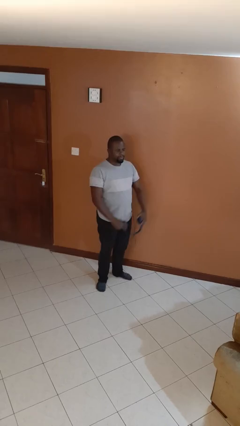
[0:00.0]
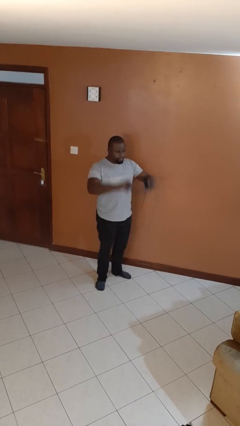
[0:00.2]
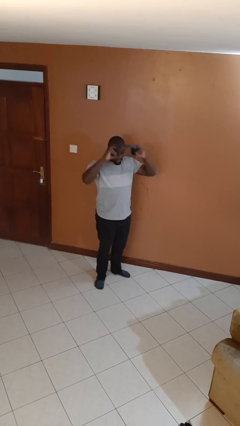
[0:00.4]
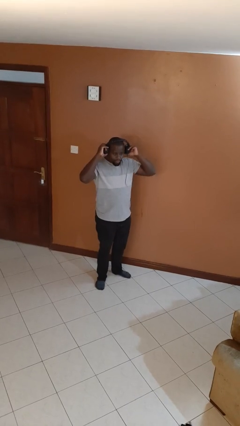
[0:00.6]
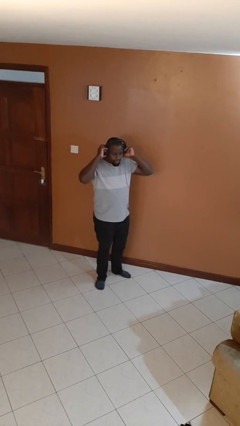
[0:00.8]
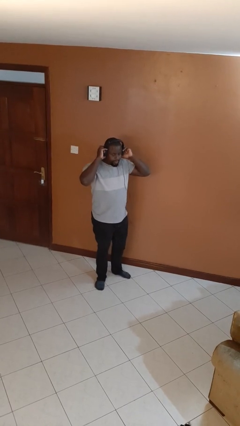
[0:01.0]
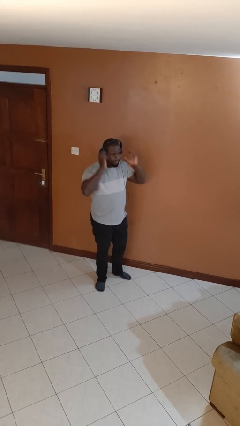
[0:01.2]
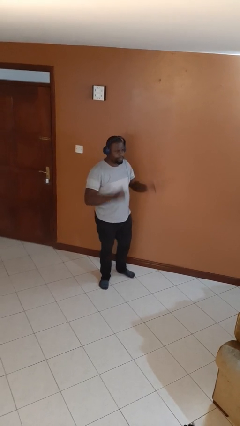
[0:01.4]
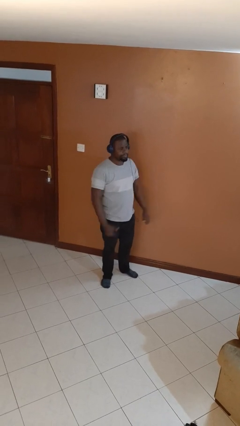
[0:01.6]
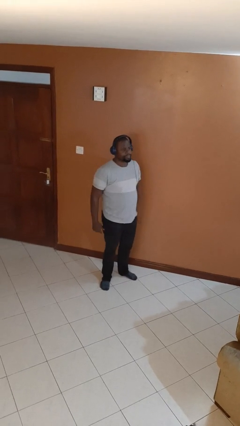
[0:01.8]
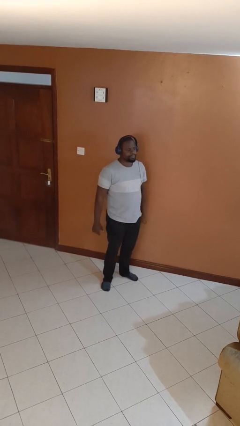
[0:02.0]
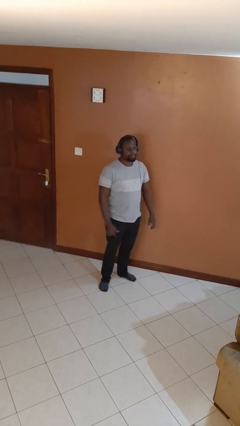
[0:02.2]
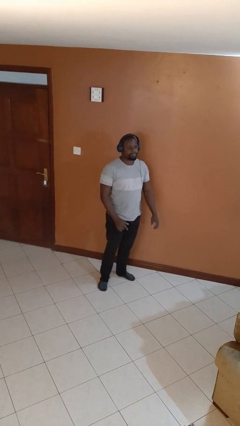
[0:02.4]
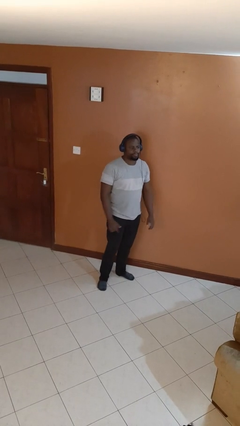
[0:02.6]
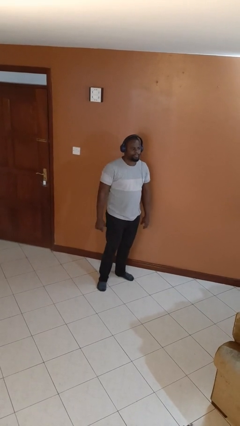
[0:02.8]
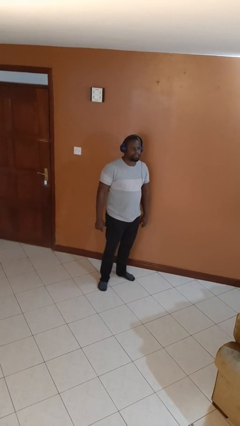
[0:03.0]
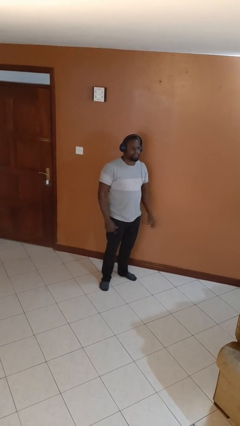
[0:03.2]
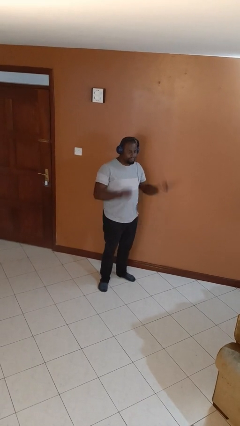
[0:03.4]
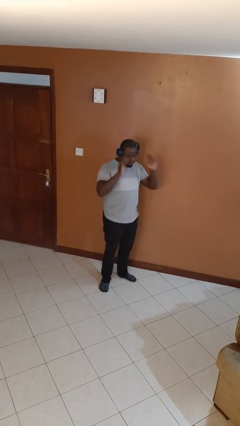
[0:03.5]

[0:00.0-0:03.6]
person puts on headphones

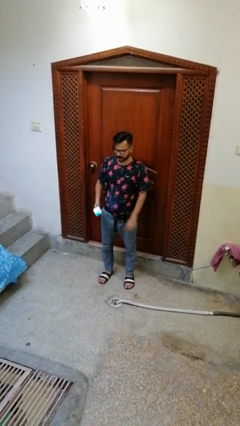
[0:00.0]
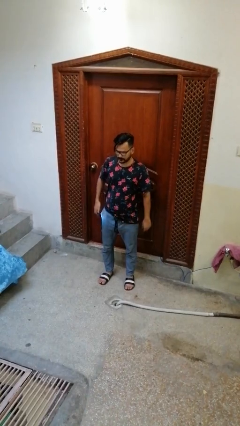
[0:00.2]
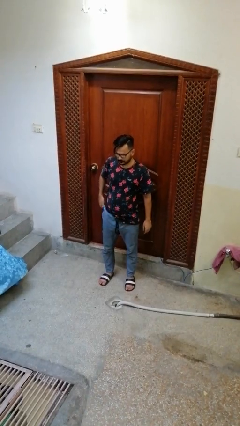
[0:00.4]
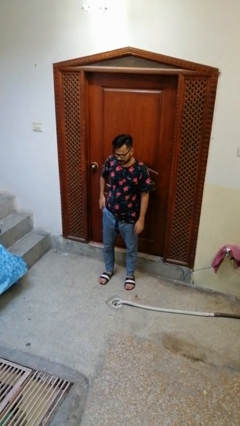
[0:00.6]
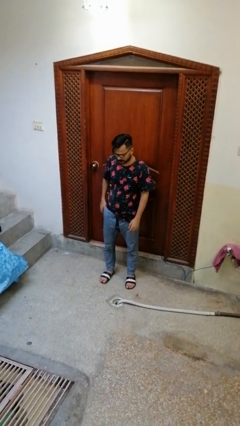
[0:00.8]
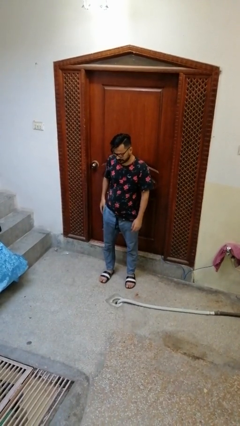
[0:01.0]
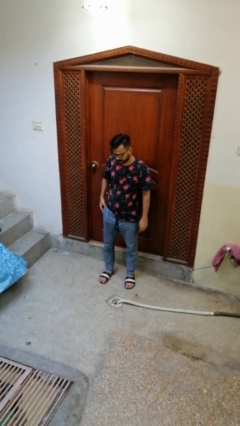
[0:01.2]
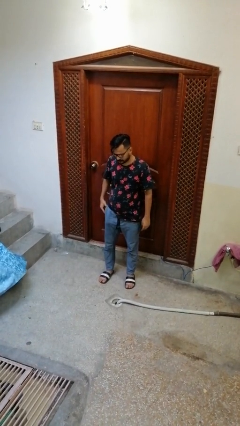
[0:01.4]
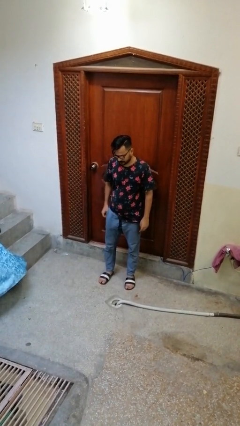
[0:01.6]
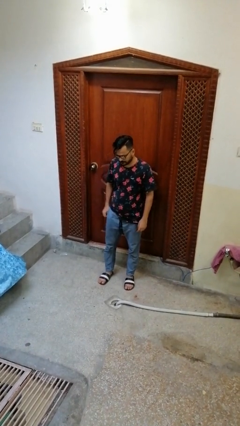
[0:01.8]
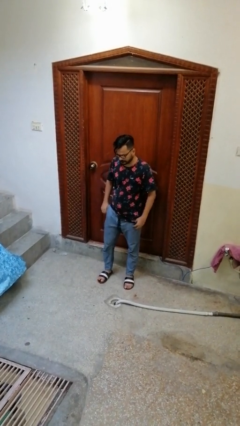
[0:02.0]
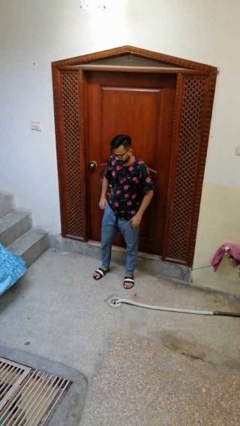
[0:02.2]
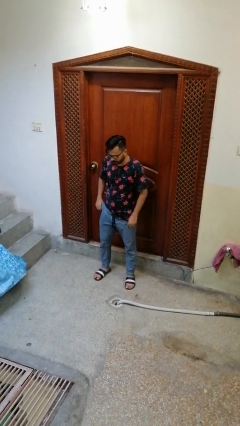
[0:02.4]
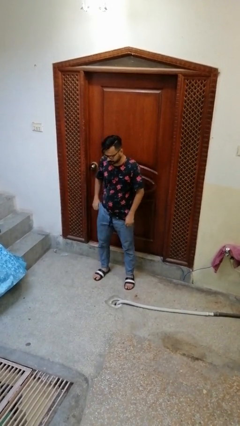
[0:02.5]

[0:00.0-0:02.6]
person puts phone into pocket

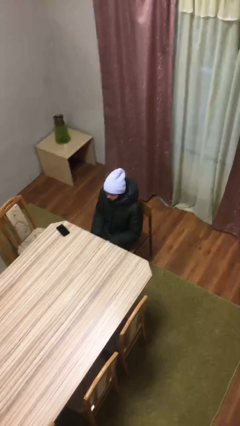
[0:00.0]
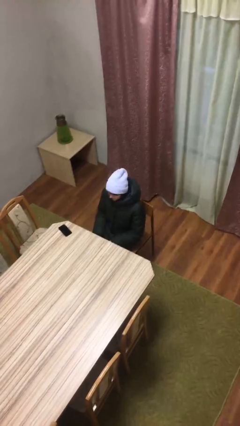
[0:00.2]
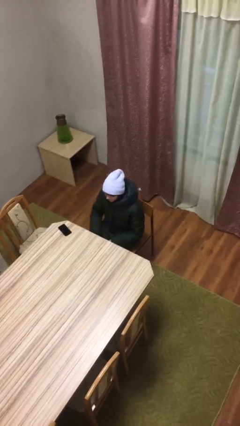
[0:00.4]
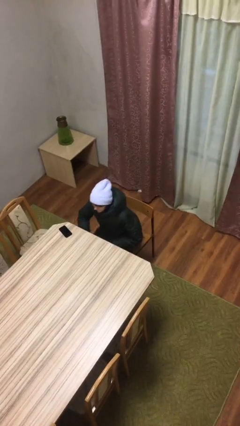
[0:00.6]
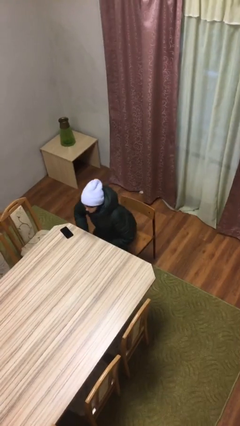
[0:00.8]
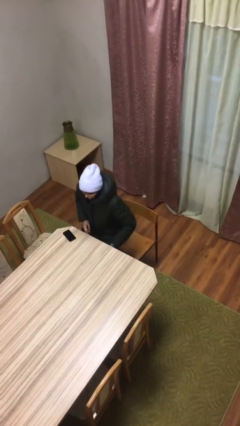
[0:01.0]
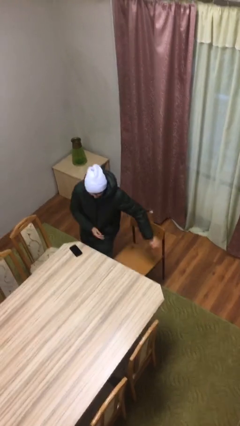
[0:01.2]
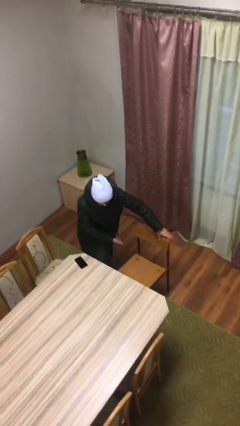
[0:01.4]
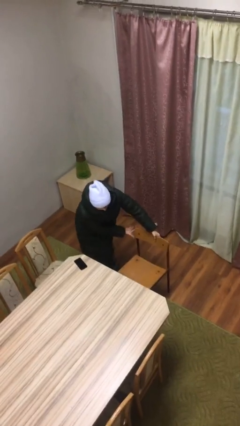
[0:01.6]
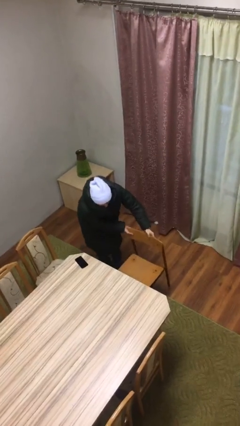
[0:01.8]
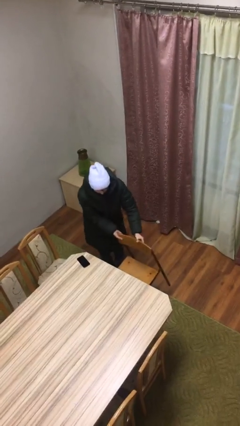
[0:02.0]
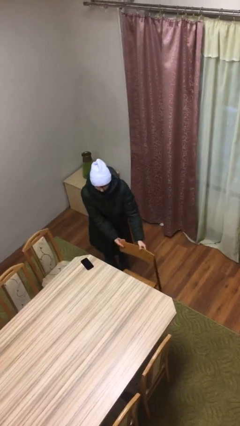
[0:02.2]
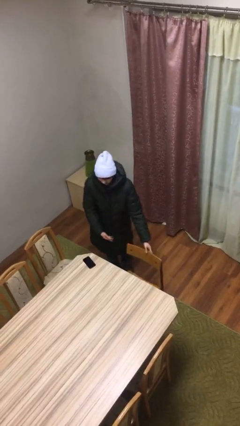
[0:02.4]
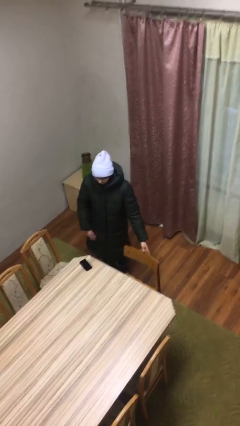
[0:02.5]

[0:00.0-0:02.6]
person stands up

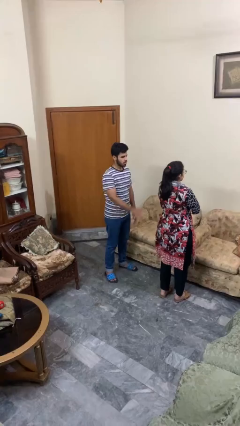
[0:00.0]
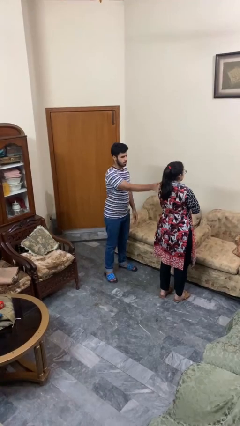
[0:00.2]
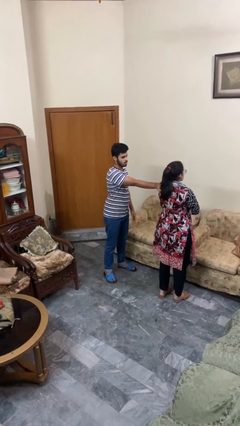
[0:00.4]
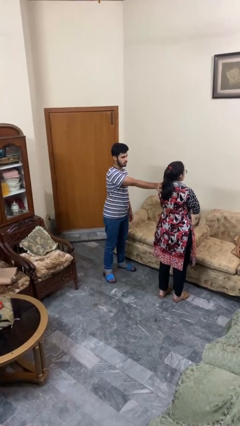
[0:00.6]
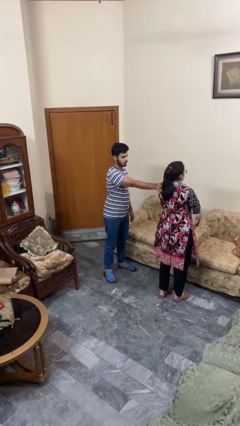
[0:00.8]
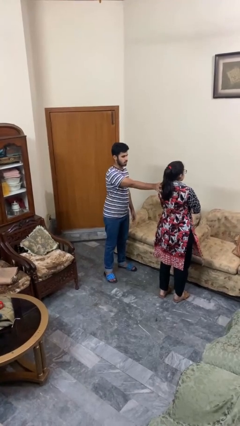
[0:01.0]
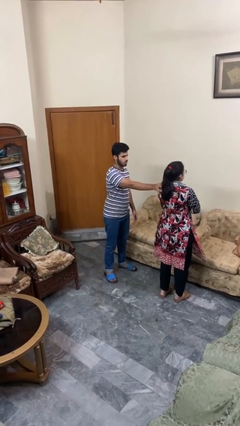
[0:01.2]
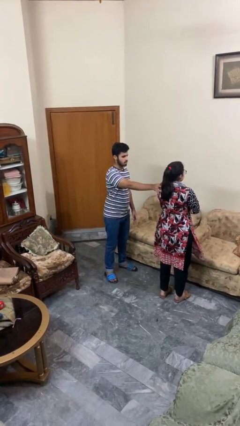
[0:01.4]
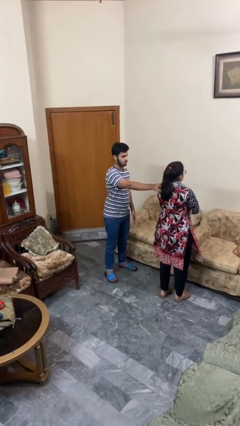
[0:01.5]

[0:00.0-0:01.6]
person grabs person by shoulder

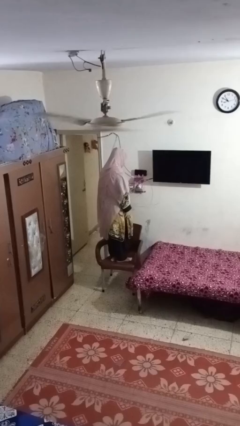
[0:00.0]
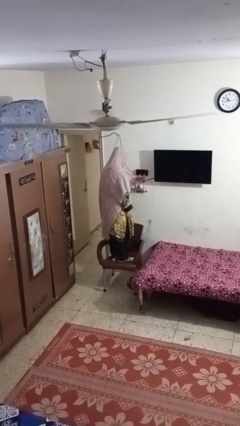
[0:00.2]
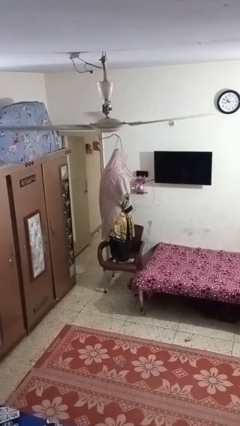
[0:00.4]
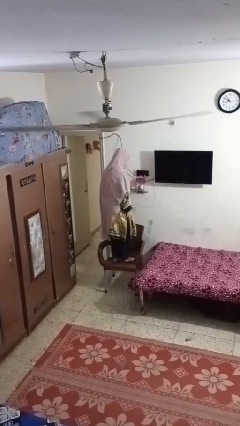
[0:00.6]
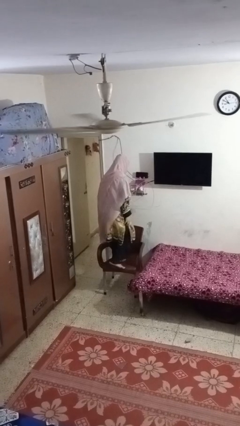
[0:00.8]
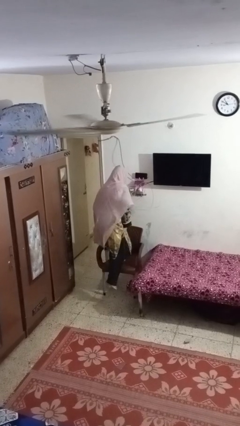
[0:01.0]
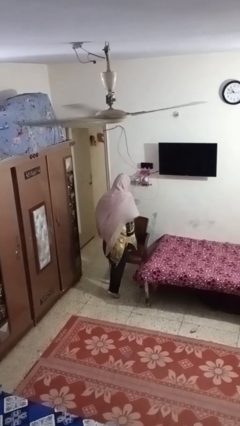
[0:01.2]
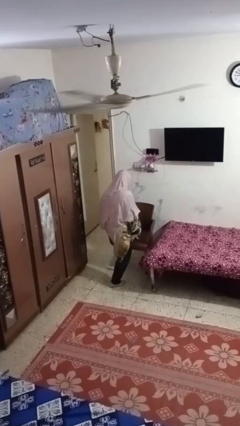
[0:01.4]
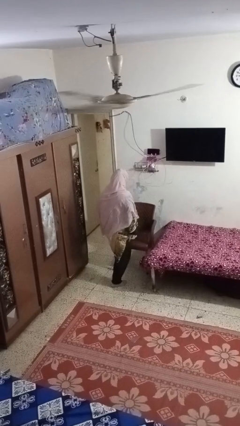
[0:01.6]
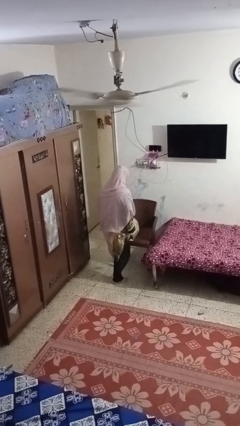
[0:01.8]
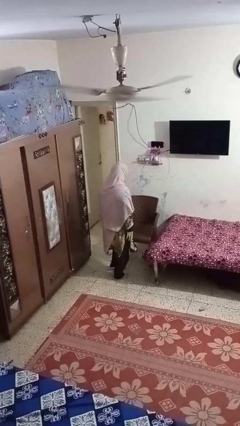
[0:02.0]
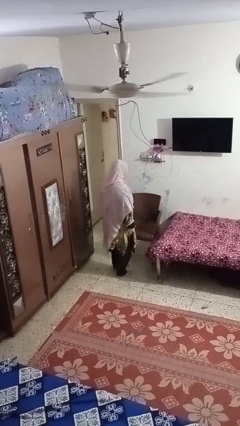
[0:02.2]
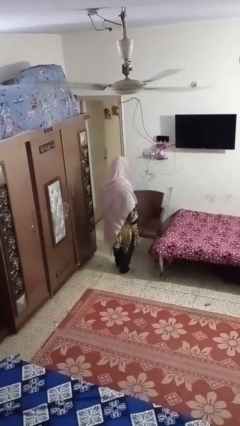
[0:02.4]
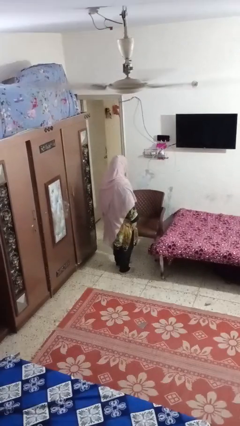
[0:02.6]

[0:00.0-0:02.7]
person climbs off chair

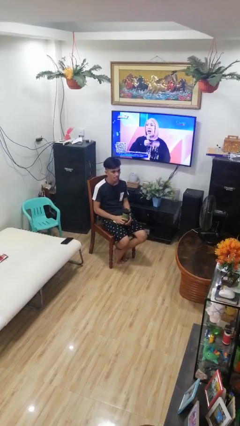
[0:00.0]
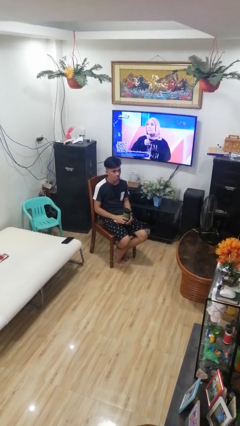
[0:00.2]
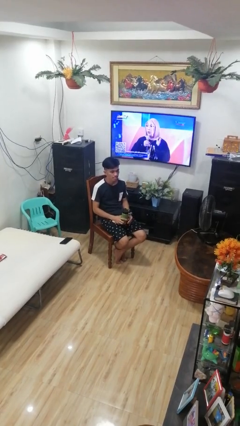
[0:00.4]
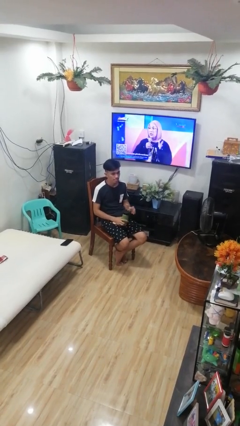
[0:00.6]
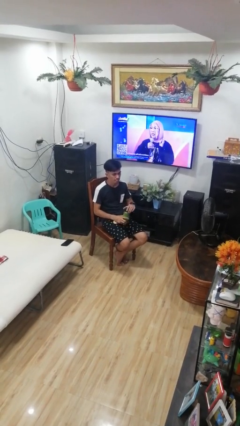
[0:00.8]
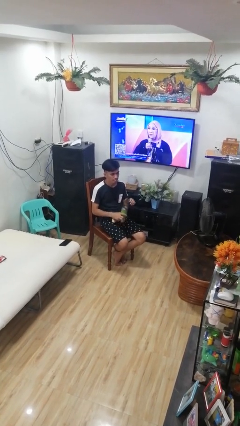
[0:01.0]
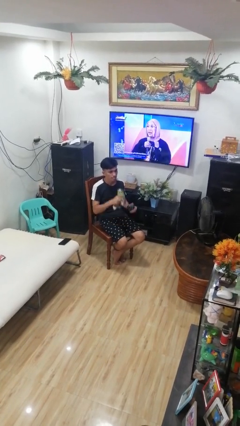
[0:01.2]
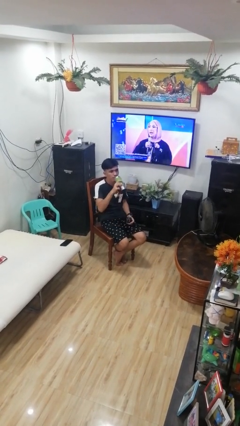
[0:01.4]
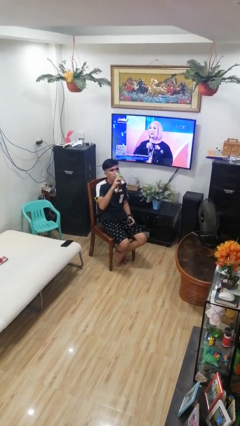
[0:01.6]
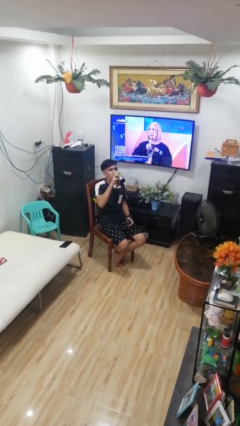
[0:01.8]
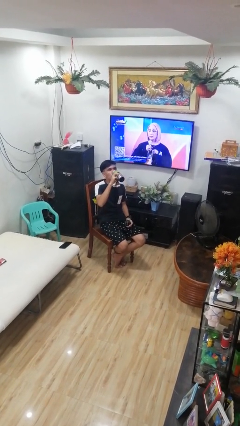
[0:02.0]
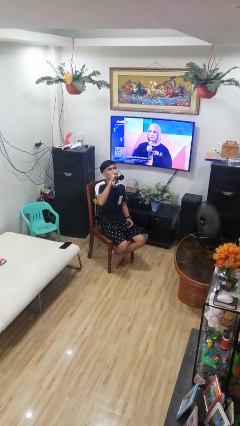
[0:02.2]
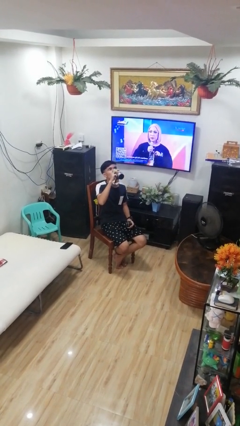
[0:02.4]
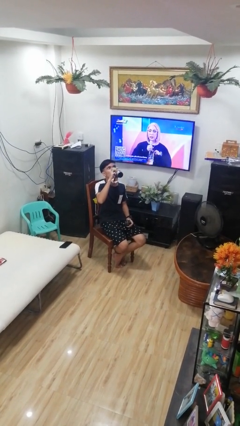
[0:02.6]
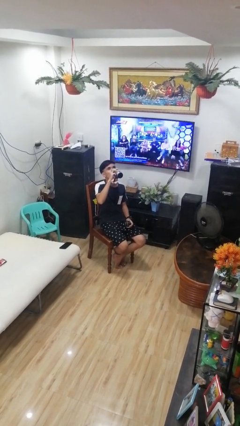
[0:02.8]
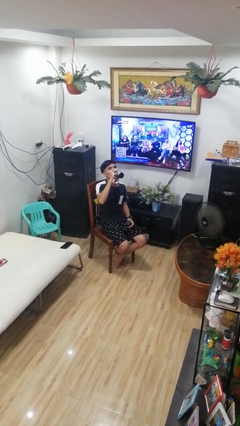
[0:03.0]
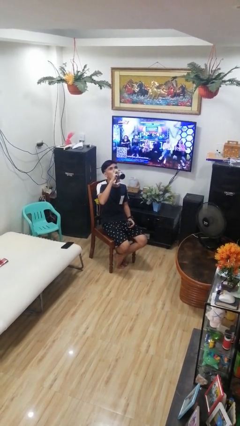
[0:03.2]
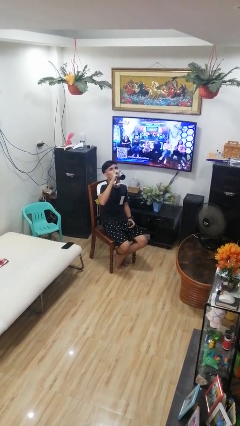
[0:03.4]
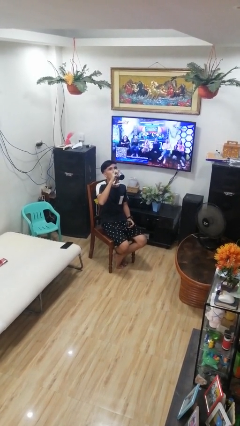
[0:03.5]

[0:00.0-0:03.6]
person drinks from bottle

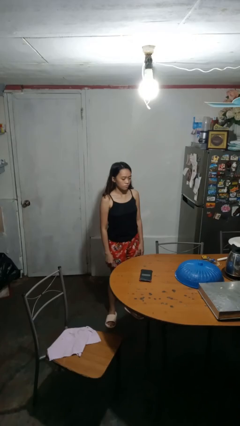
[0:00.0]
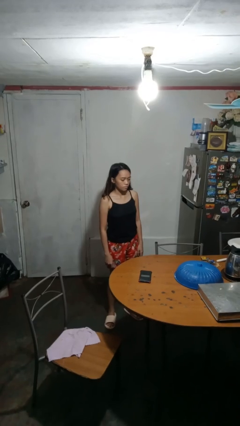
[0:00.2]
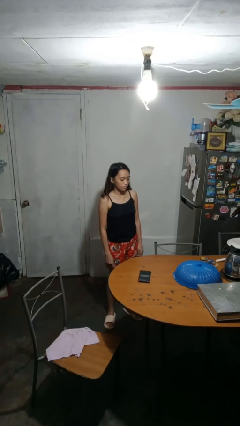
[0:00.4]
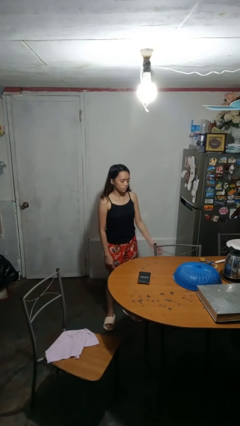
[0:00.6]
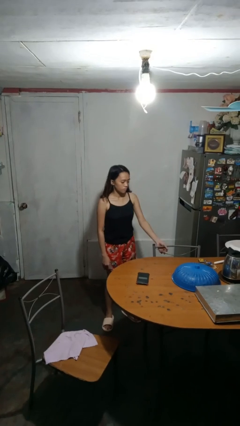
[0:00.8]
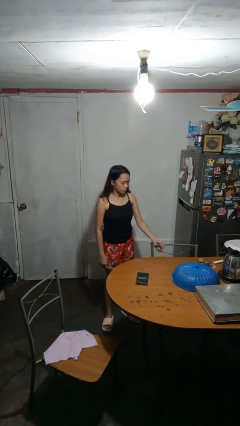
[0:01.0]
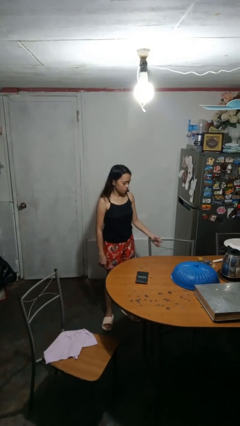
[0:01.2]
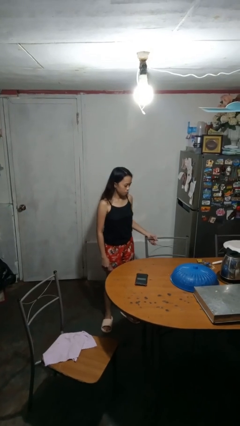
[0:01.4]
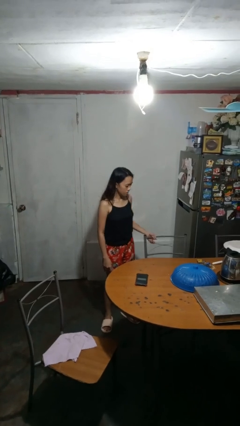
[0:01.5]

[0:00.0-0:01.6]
person pulls out chair
